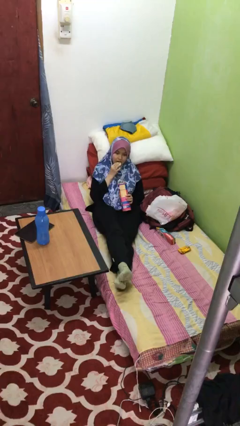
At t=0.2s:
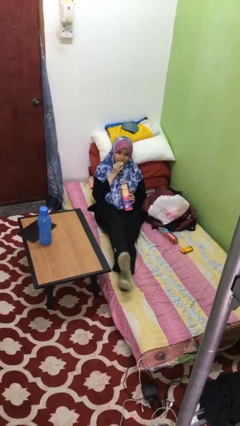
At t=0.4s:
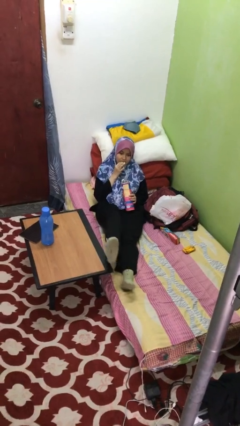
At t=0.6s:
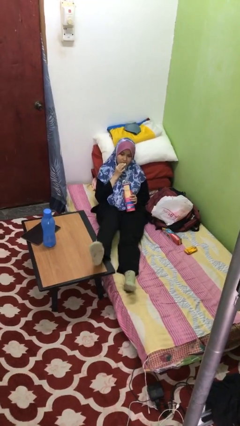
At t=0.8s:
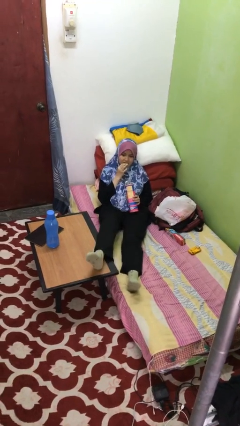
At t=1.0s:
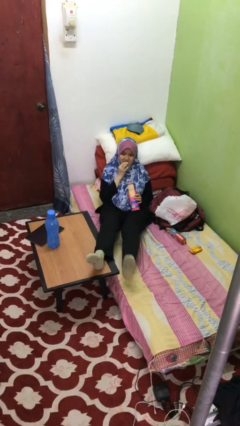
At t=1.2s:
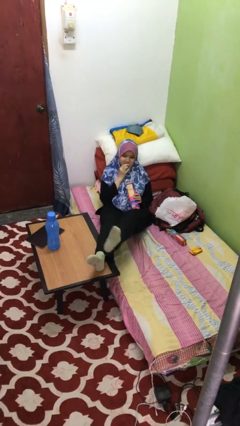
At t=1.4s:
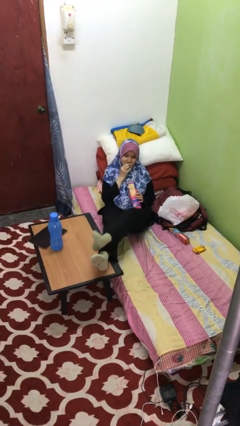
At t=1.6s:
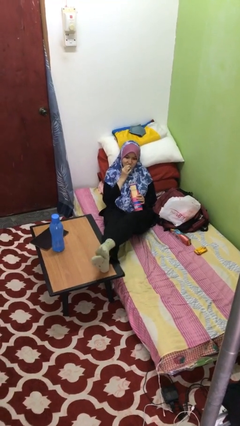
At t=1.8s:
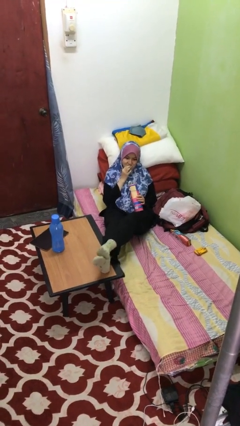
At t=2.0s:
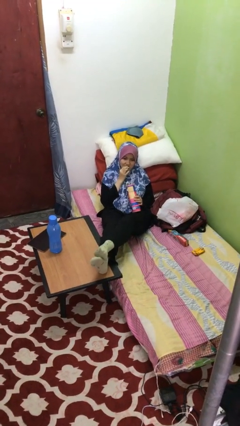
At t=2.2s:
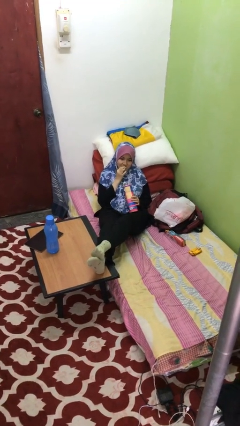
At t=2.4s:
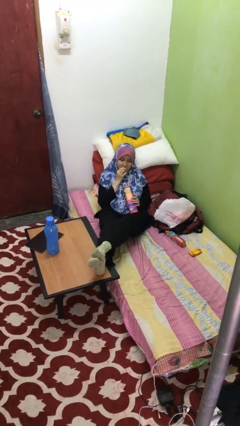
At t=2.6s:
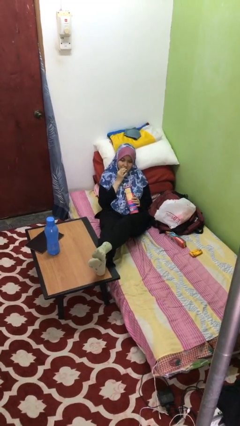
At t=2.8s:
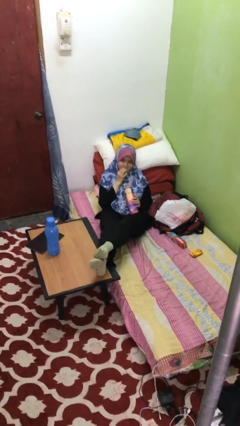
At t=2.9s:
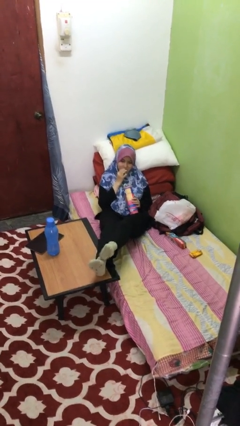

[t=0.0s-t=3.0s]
person puts feet up

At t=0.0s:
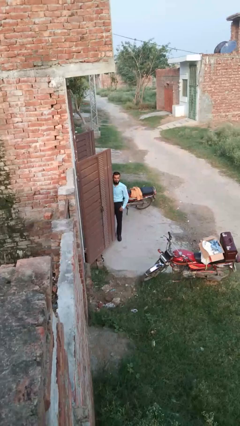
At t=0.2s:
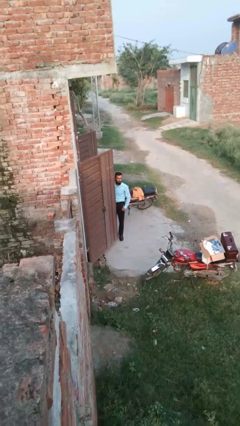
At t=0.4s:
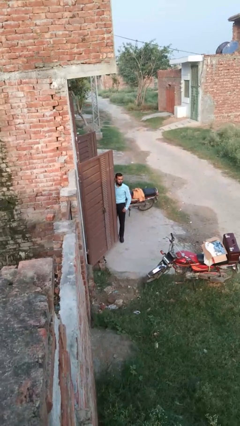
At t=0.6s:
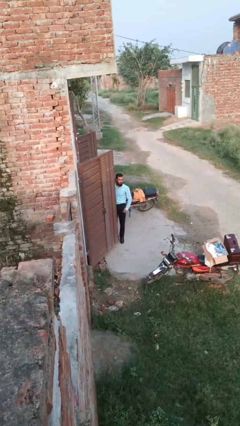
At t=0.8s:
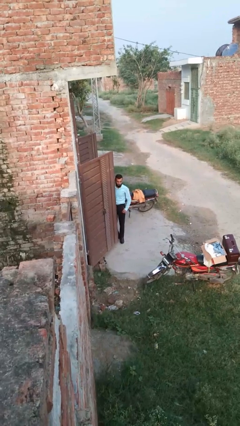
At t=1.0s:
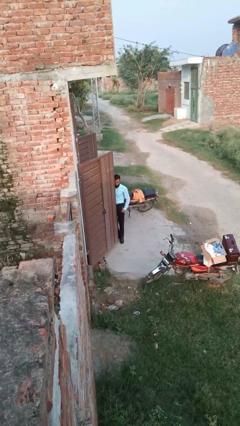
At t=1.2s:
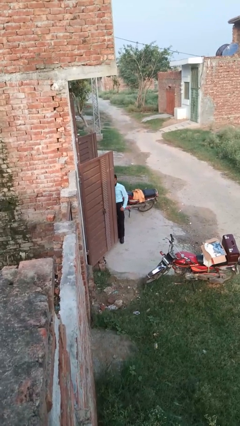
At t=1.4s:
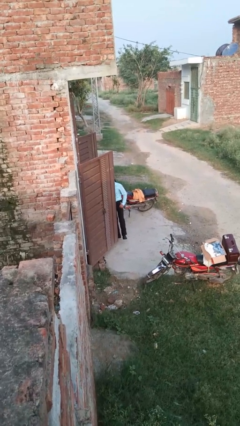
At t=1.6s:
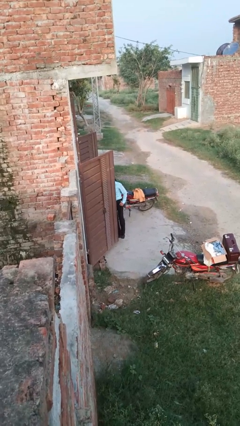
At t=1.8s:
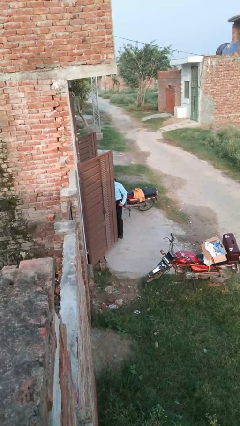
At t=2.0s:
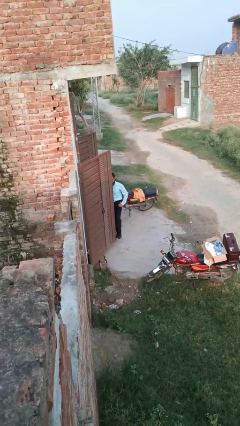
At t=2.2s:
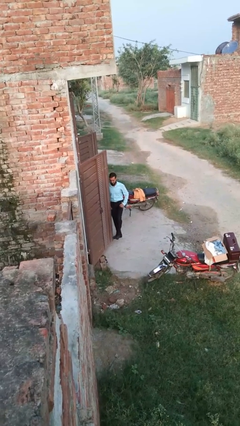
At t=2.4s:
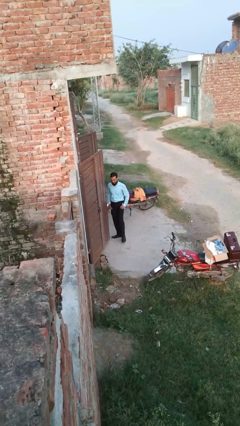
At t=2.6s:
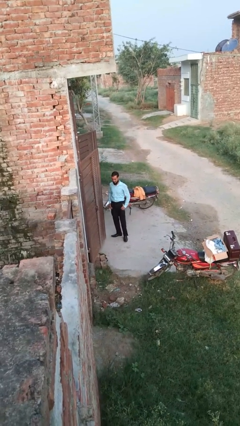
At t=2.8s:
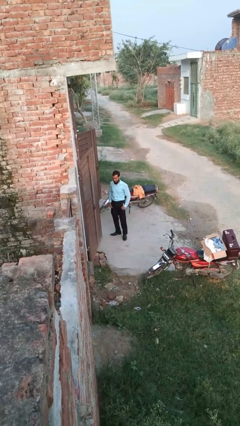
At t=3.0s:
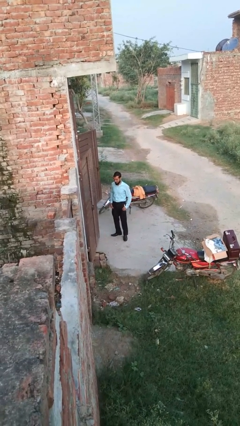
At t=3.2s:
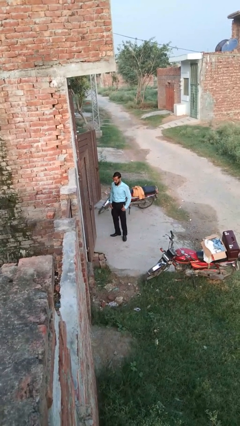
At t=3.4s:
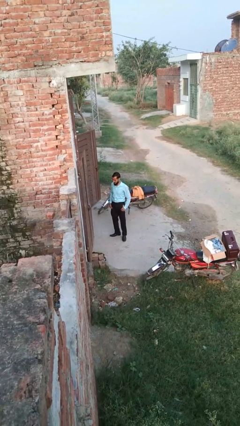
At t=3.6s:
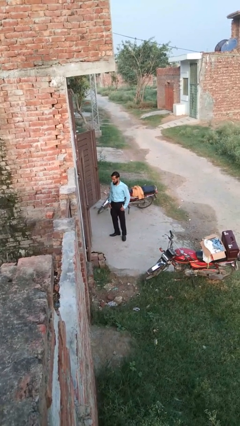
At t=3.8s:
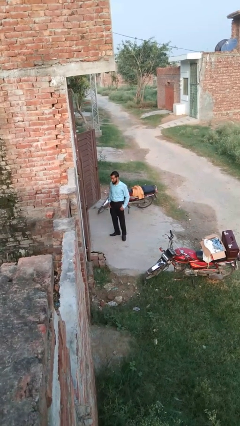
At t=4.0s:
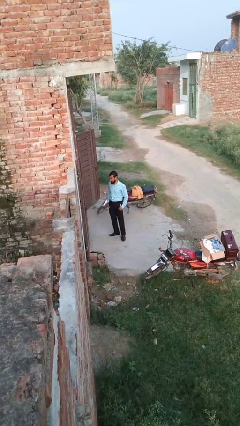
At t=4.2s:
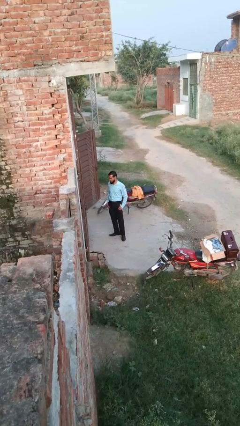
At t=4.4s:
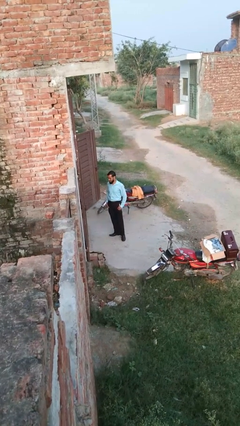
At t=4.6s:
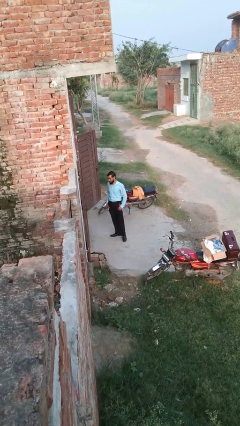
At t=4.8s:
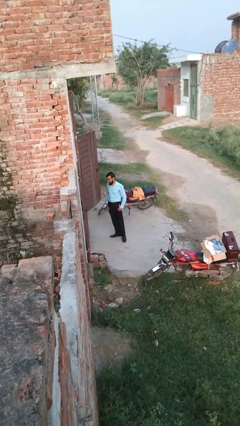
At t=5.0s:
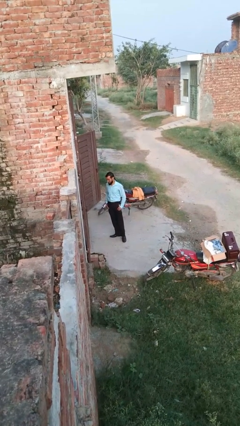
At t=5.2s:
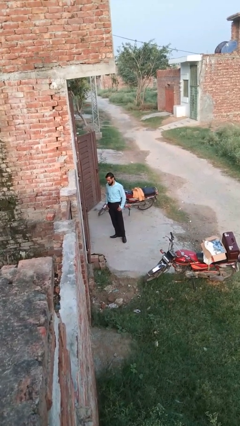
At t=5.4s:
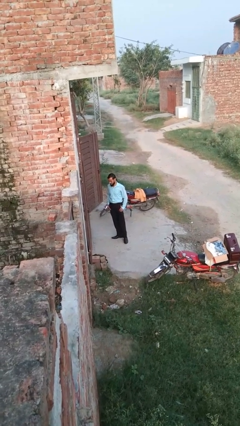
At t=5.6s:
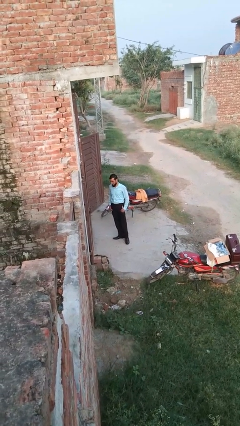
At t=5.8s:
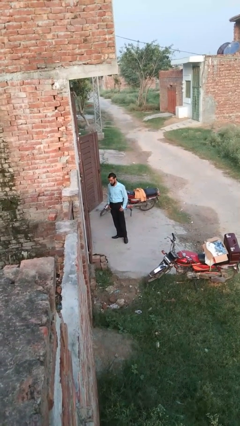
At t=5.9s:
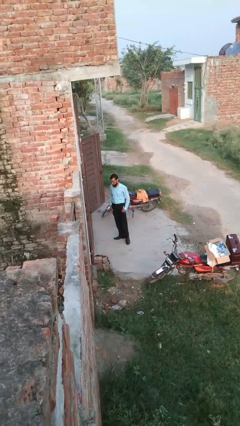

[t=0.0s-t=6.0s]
person closes door with foot

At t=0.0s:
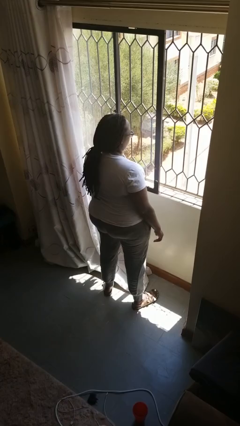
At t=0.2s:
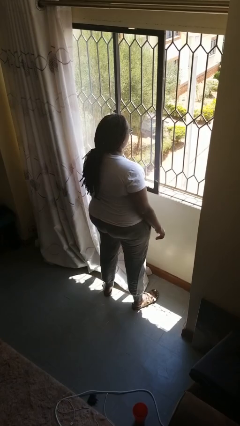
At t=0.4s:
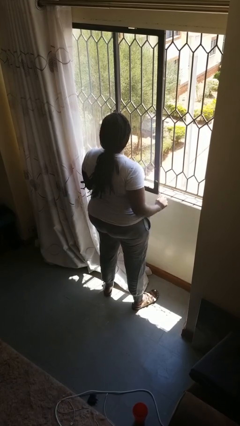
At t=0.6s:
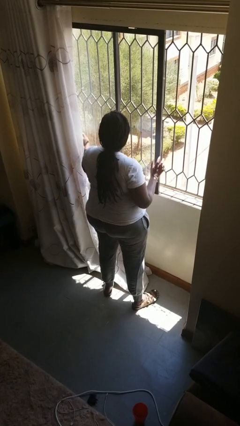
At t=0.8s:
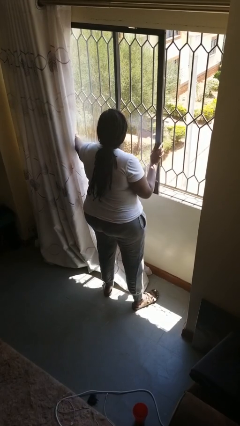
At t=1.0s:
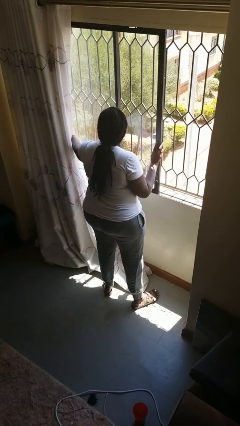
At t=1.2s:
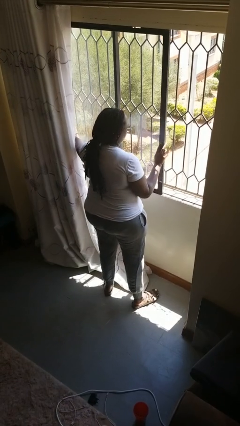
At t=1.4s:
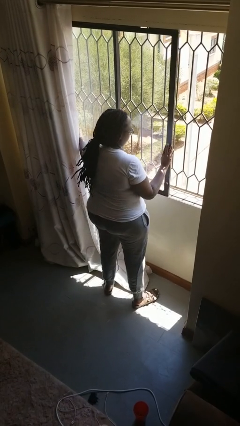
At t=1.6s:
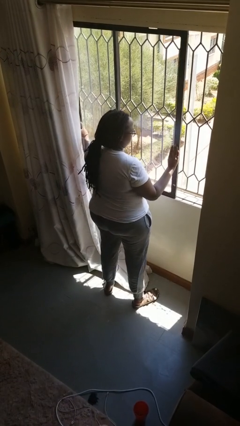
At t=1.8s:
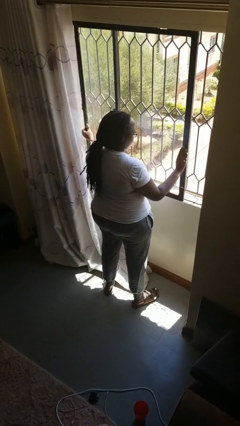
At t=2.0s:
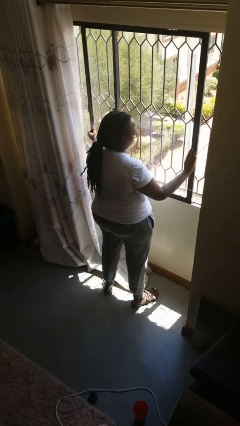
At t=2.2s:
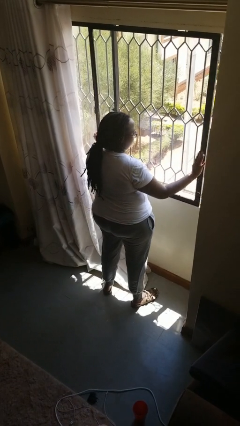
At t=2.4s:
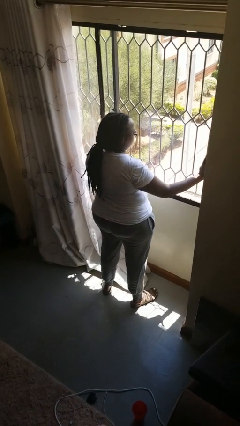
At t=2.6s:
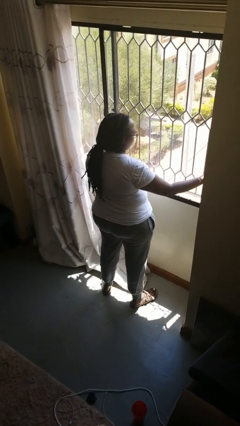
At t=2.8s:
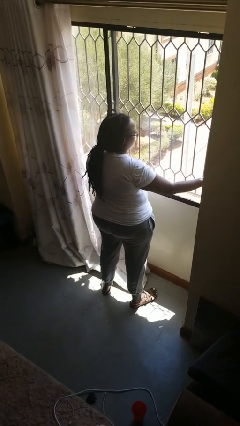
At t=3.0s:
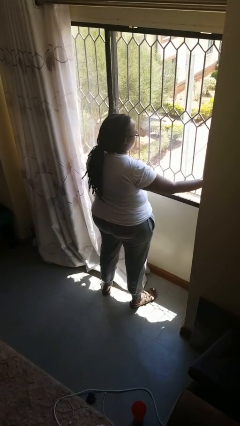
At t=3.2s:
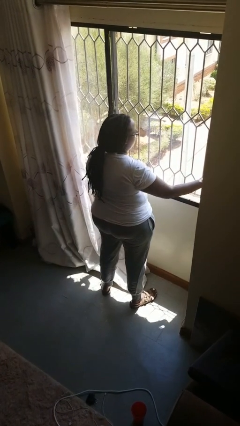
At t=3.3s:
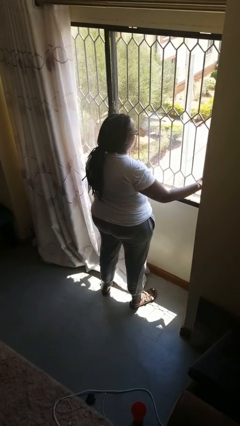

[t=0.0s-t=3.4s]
person closes home window

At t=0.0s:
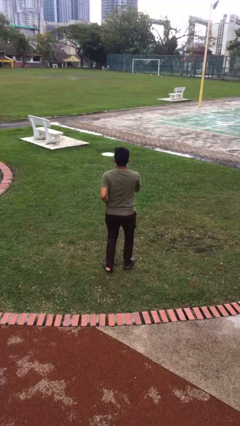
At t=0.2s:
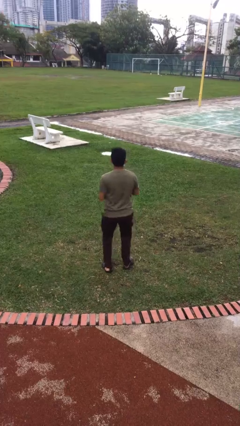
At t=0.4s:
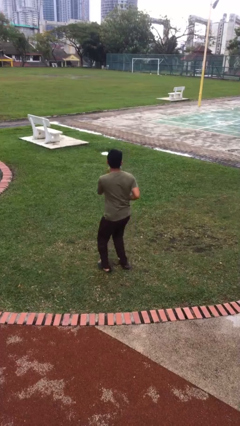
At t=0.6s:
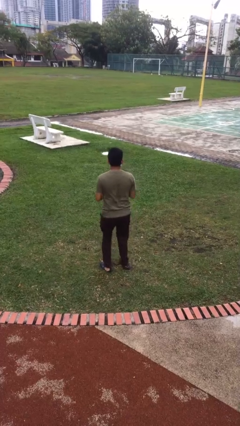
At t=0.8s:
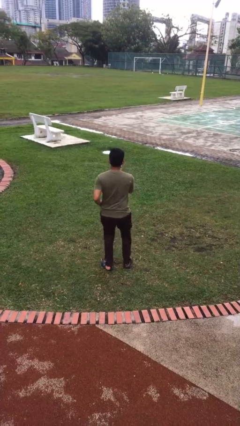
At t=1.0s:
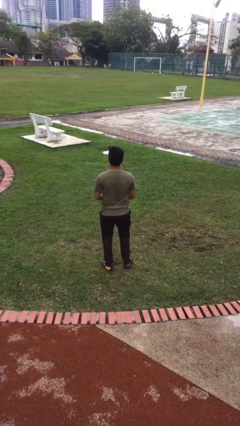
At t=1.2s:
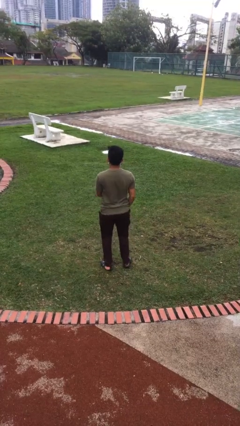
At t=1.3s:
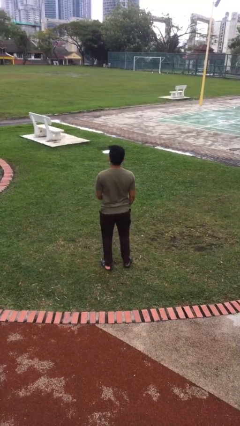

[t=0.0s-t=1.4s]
person dances in place

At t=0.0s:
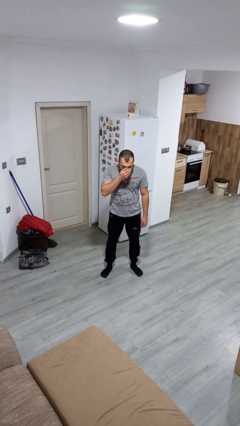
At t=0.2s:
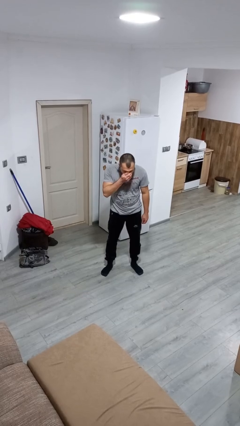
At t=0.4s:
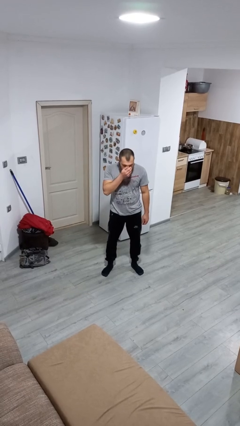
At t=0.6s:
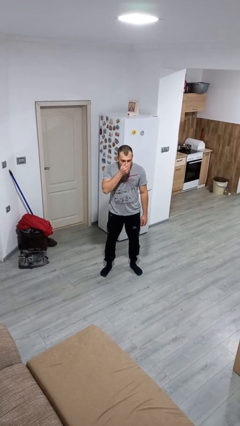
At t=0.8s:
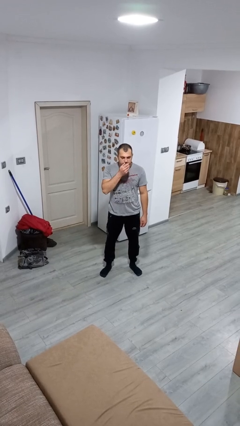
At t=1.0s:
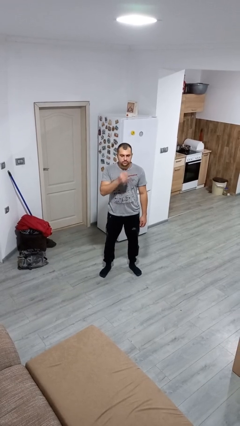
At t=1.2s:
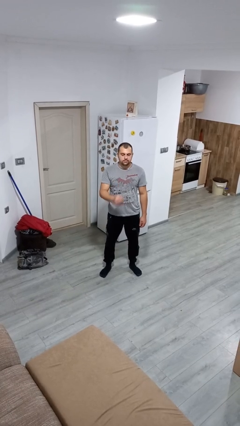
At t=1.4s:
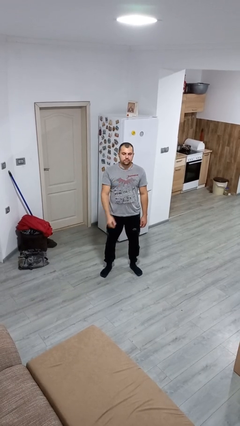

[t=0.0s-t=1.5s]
person sneezes into hand

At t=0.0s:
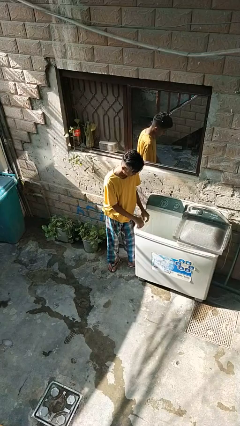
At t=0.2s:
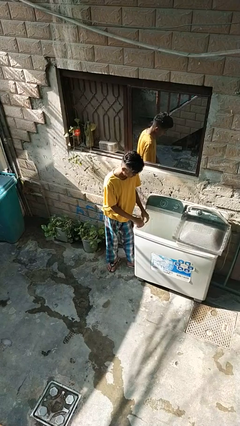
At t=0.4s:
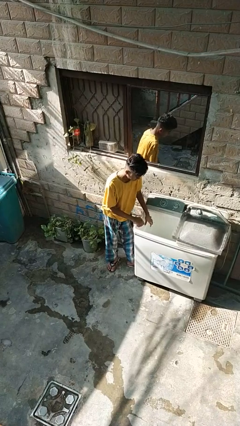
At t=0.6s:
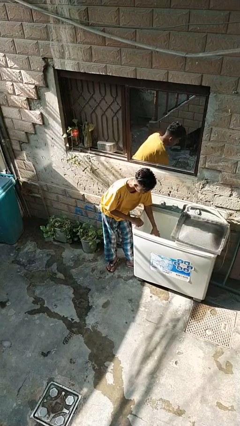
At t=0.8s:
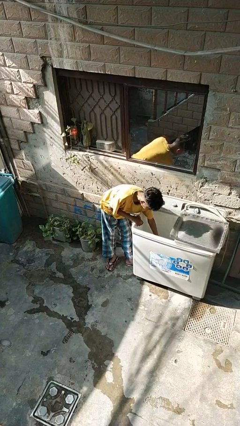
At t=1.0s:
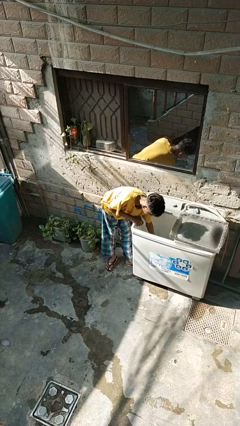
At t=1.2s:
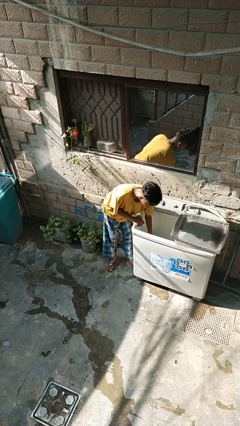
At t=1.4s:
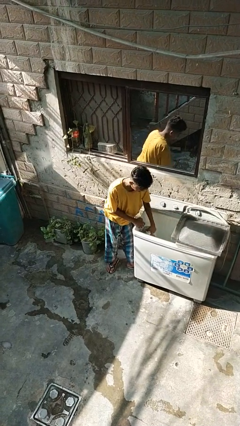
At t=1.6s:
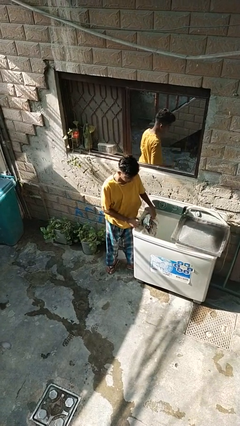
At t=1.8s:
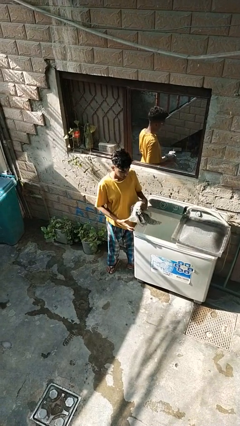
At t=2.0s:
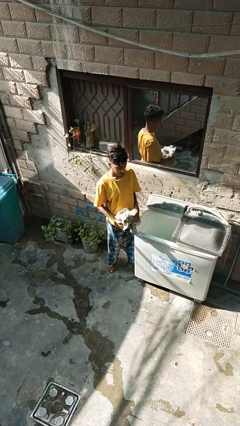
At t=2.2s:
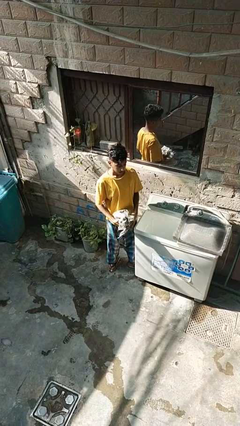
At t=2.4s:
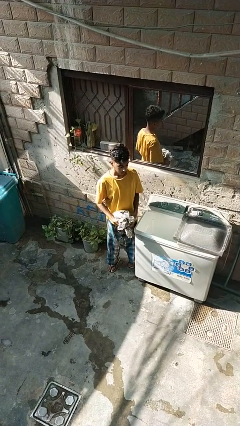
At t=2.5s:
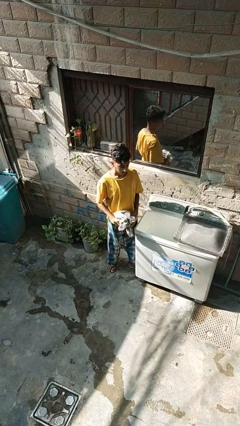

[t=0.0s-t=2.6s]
person unloads clotheswasher
